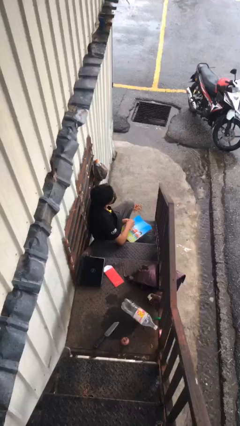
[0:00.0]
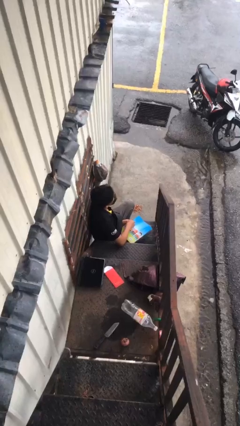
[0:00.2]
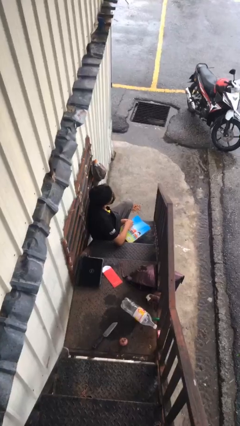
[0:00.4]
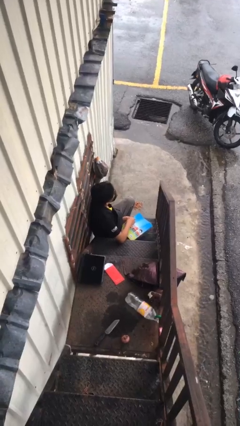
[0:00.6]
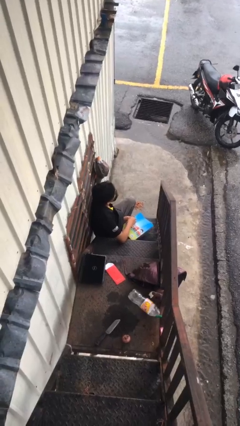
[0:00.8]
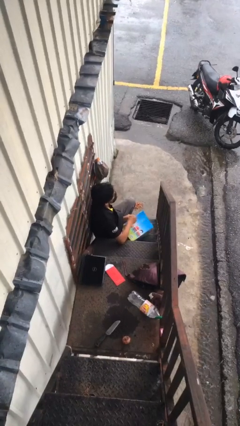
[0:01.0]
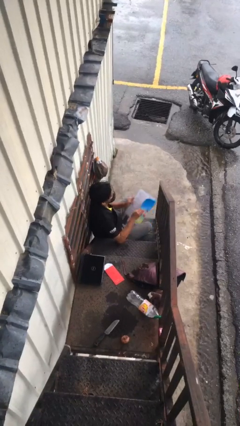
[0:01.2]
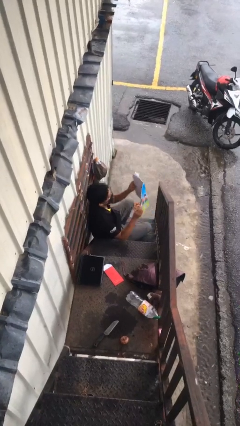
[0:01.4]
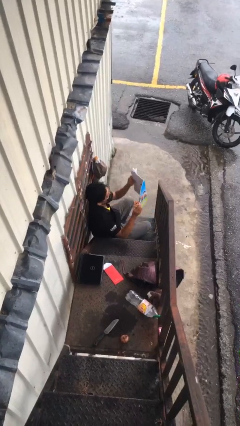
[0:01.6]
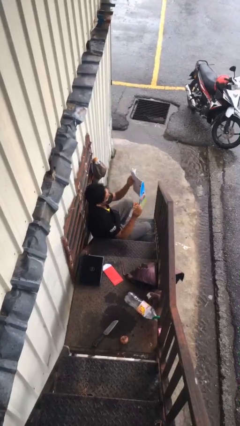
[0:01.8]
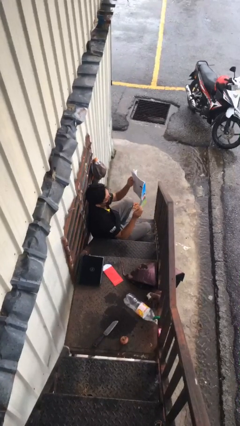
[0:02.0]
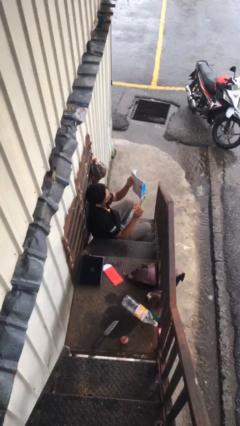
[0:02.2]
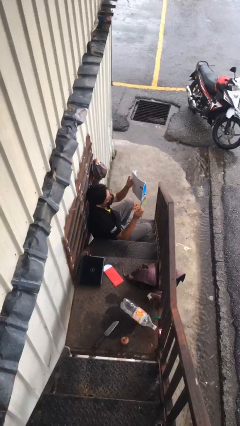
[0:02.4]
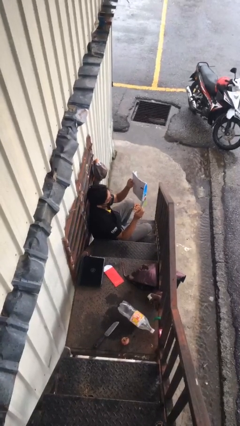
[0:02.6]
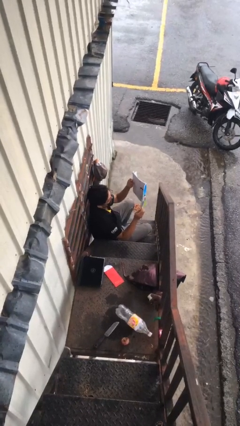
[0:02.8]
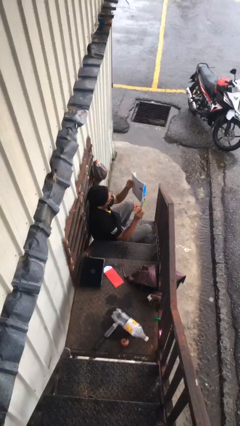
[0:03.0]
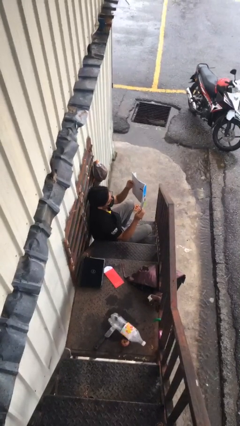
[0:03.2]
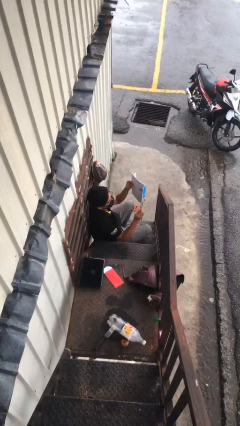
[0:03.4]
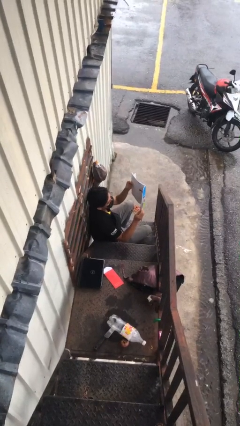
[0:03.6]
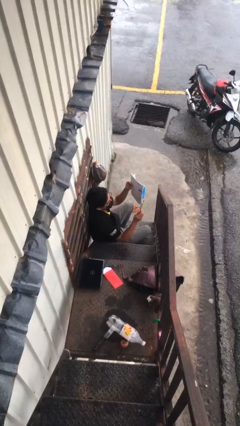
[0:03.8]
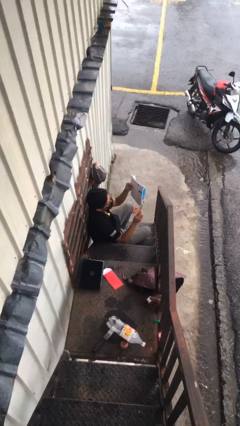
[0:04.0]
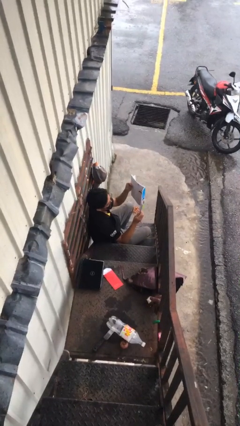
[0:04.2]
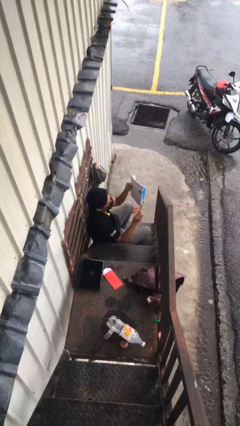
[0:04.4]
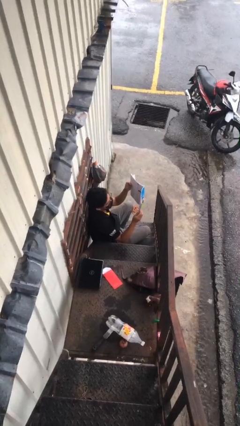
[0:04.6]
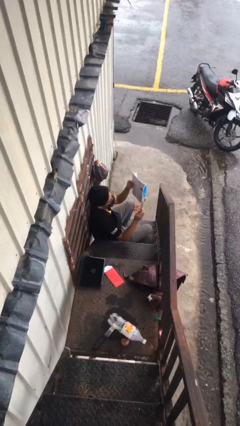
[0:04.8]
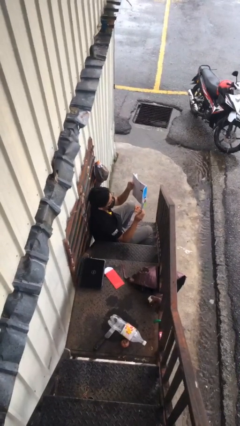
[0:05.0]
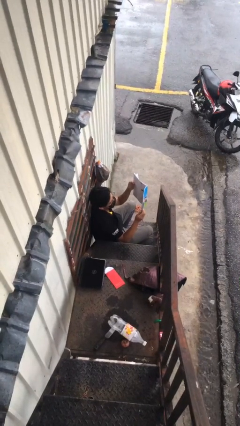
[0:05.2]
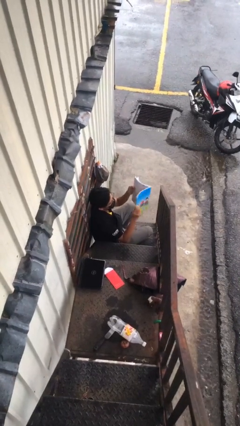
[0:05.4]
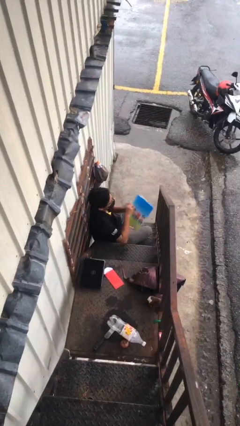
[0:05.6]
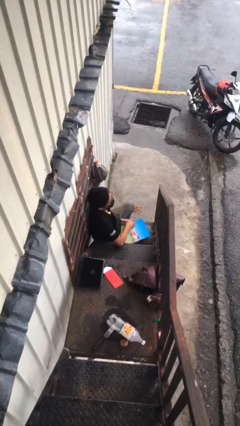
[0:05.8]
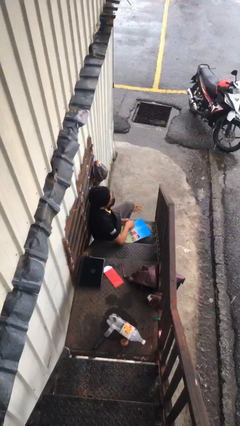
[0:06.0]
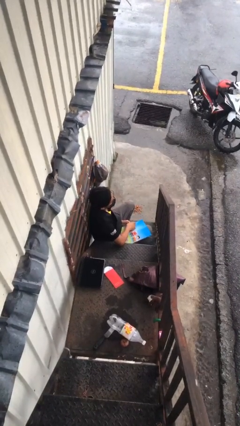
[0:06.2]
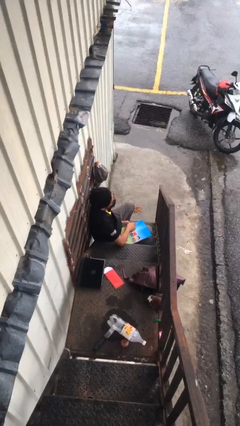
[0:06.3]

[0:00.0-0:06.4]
person reads document

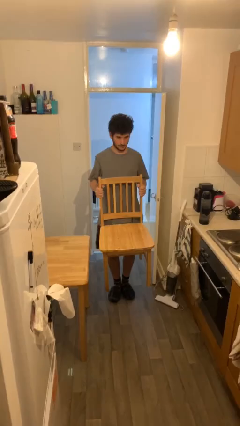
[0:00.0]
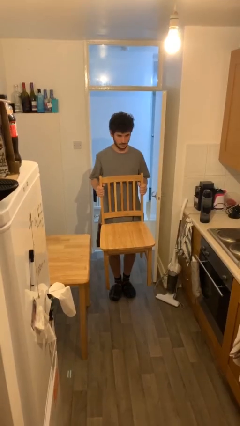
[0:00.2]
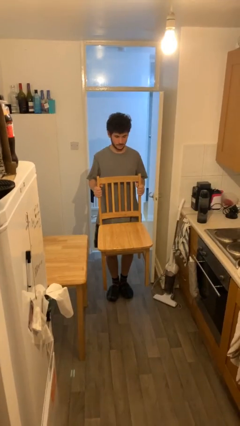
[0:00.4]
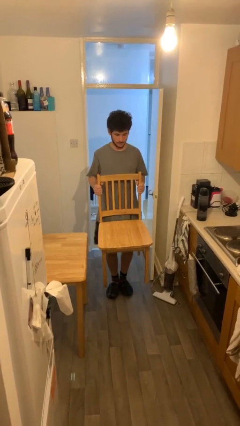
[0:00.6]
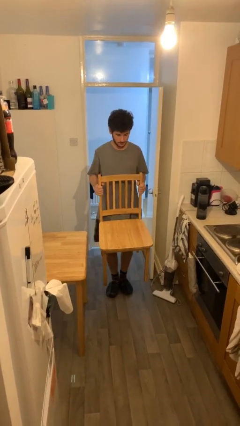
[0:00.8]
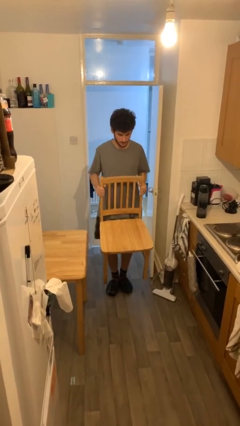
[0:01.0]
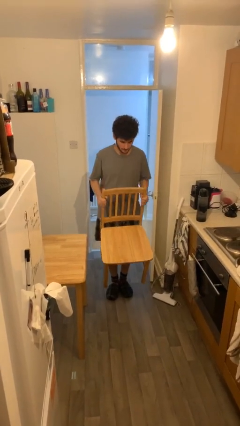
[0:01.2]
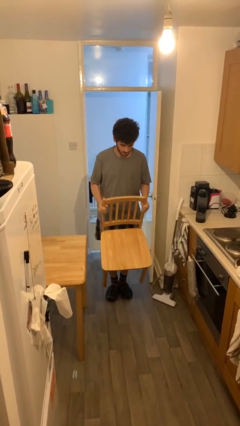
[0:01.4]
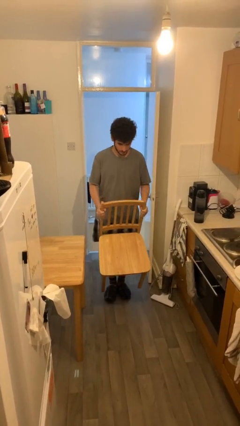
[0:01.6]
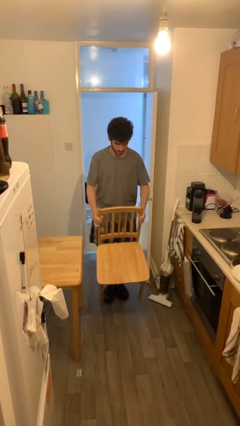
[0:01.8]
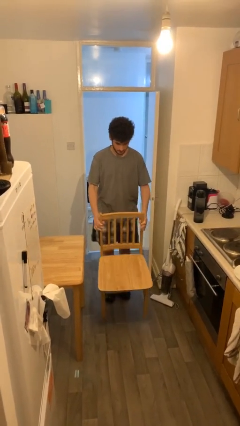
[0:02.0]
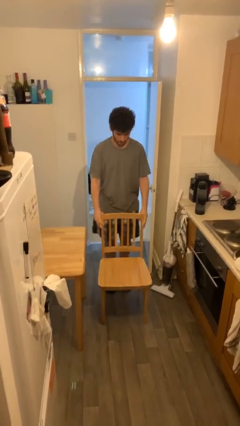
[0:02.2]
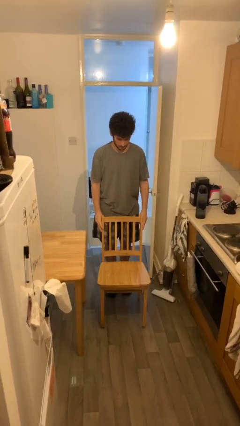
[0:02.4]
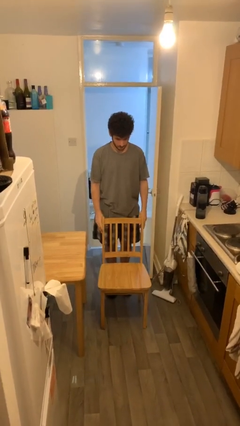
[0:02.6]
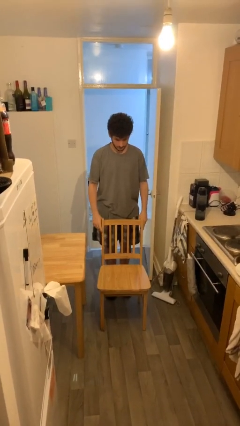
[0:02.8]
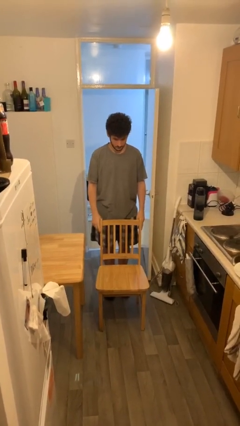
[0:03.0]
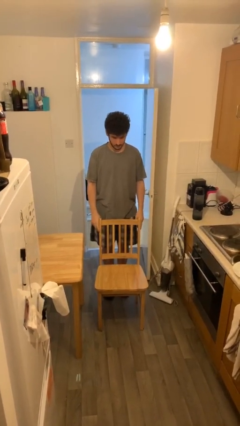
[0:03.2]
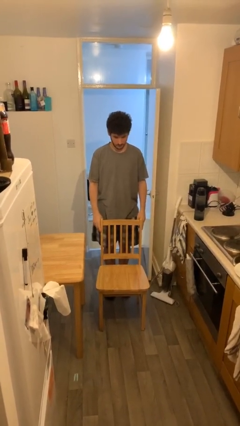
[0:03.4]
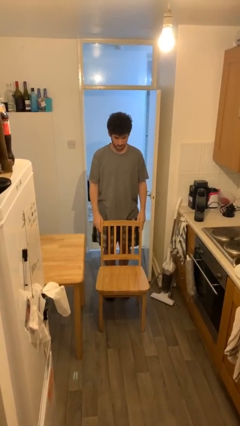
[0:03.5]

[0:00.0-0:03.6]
person puts down object on floor

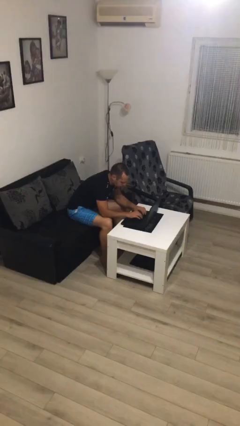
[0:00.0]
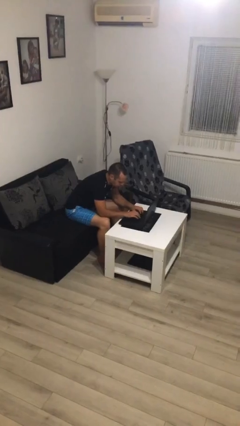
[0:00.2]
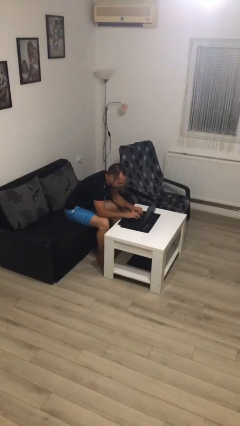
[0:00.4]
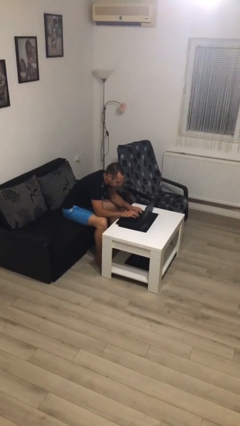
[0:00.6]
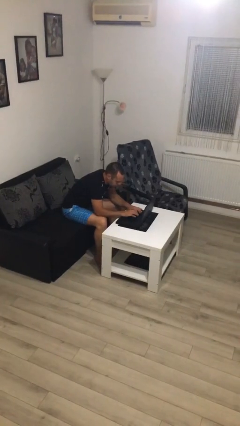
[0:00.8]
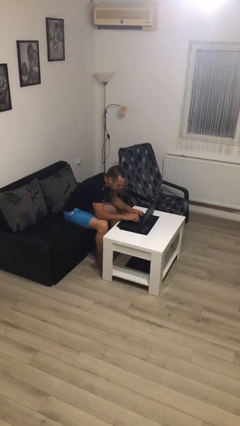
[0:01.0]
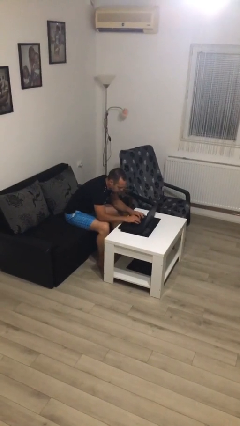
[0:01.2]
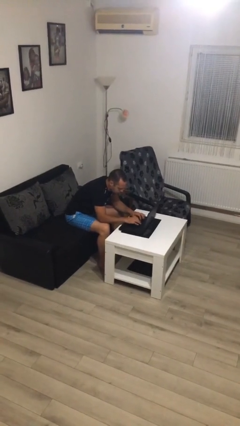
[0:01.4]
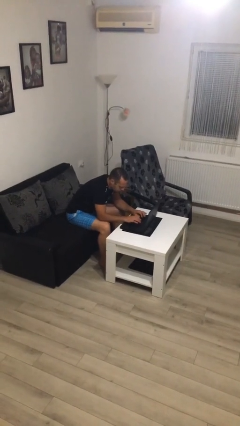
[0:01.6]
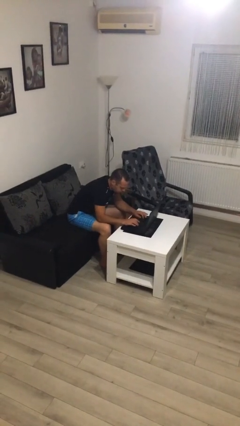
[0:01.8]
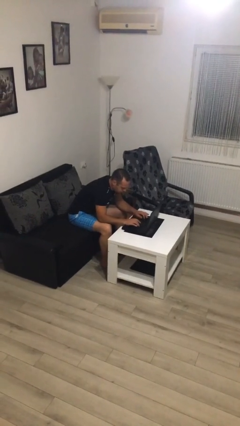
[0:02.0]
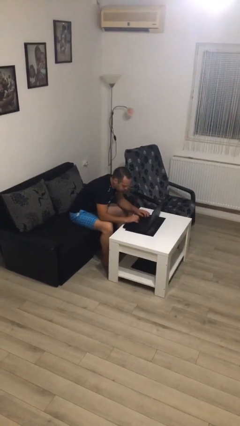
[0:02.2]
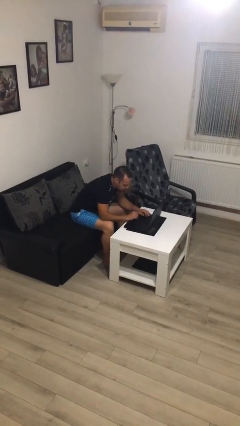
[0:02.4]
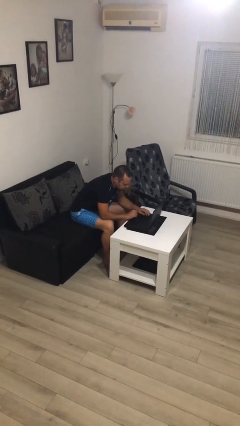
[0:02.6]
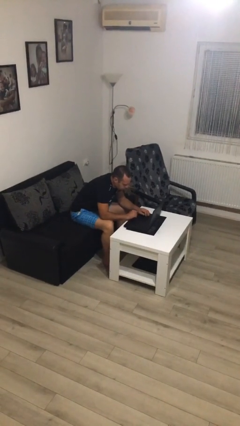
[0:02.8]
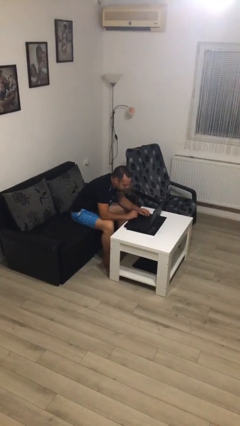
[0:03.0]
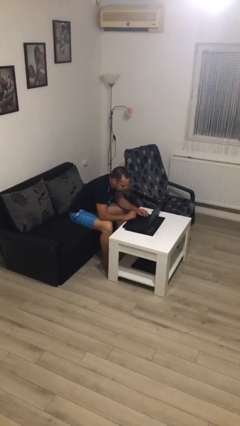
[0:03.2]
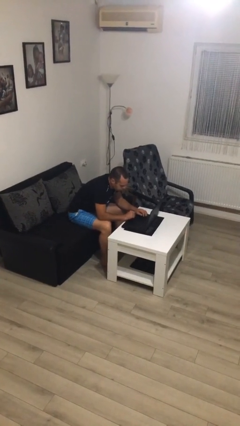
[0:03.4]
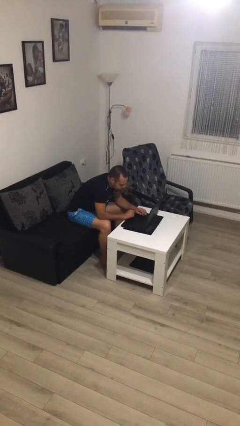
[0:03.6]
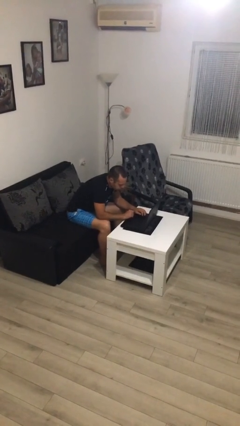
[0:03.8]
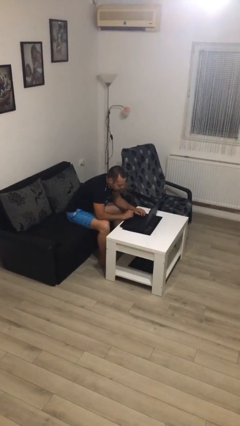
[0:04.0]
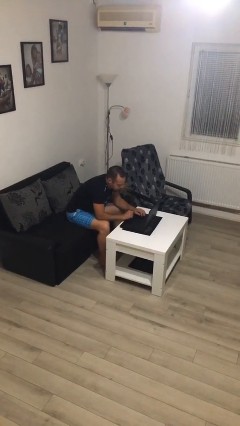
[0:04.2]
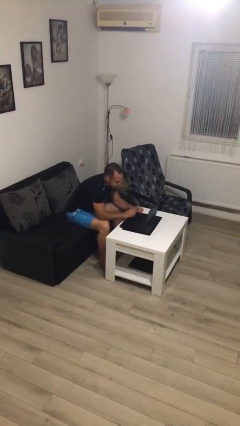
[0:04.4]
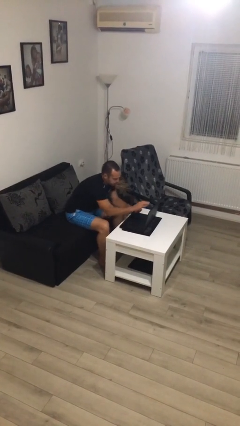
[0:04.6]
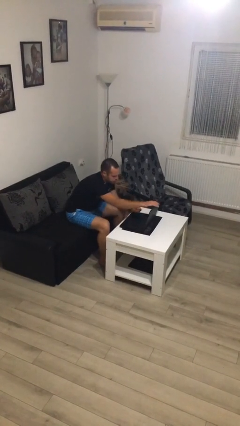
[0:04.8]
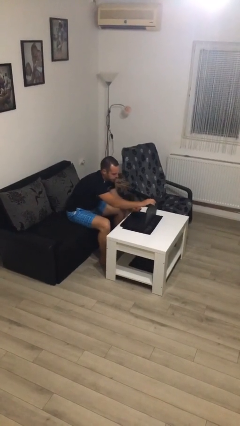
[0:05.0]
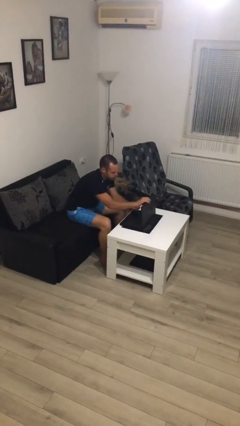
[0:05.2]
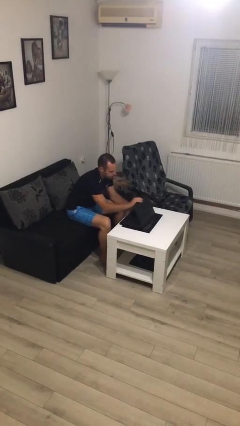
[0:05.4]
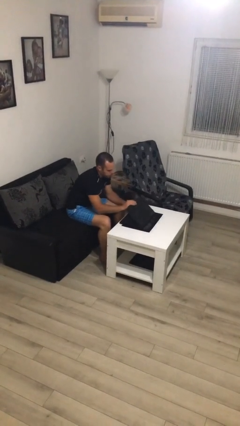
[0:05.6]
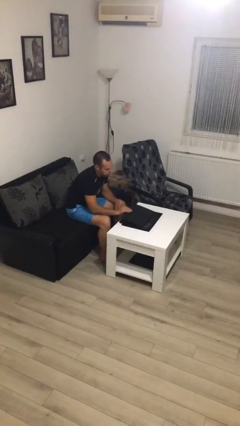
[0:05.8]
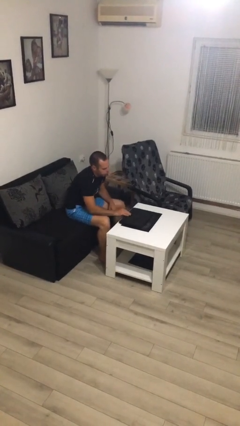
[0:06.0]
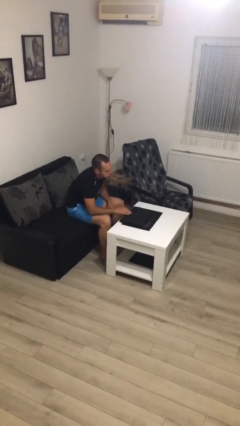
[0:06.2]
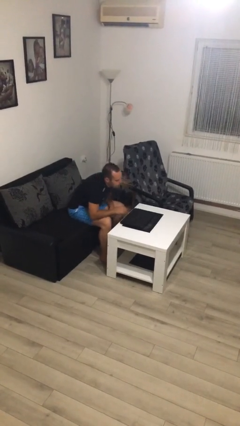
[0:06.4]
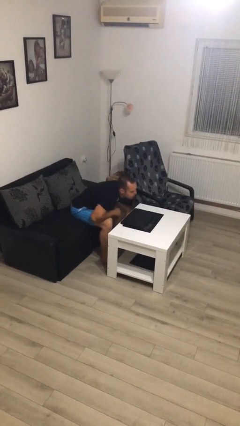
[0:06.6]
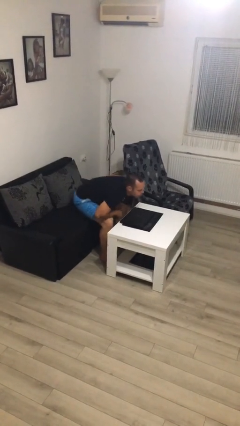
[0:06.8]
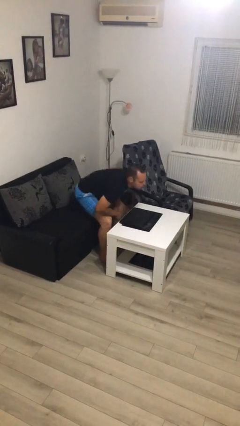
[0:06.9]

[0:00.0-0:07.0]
person interacts with laptop

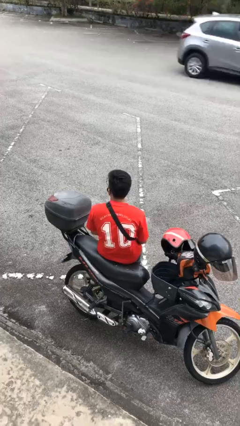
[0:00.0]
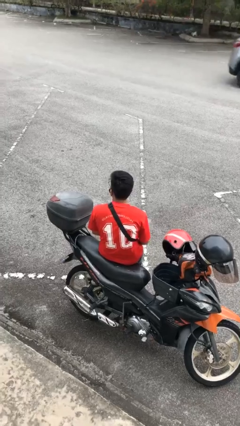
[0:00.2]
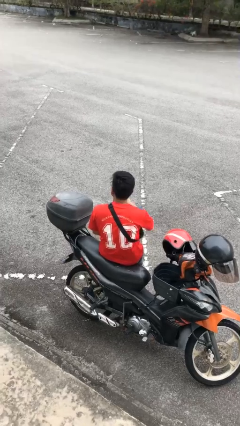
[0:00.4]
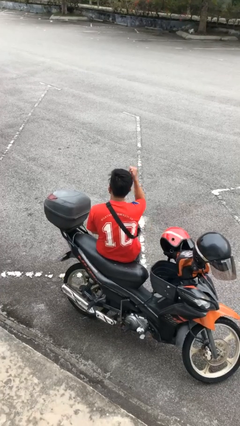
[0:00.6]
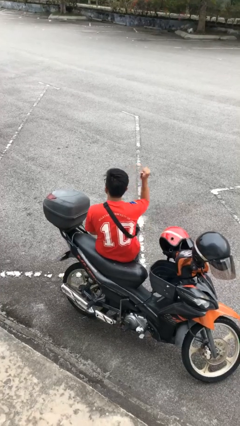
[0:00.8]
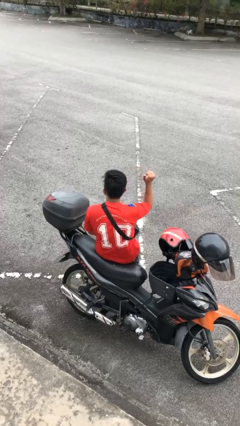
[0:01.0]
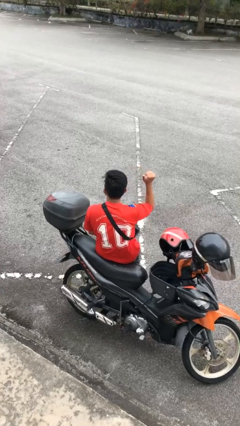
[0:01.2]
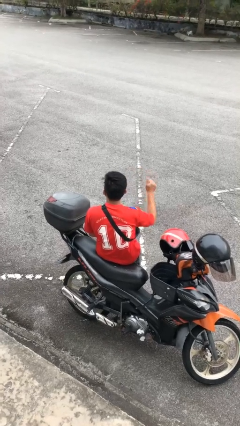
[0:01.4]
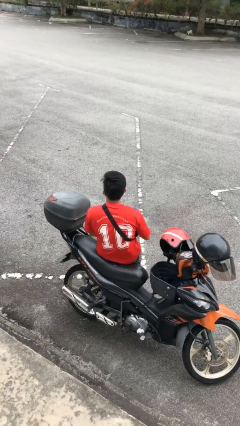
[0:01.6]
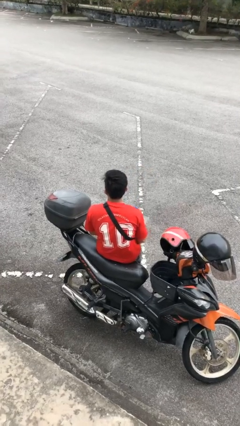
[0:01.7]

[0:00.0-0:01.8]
person gestures thumbs up
